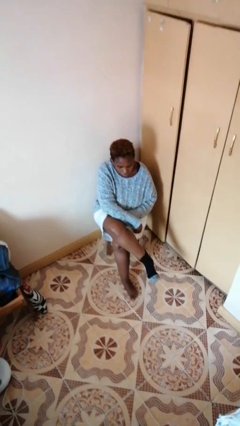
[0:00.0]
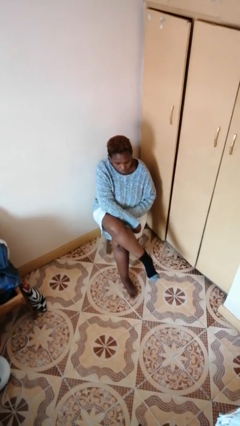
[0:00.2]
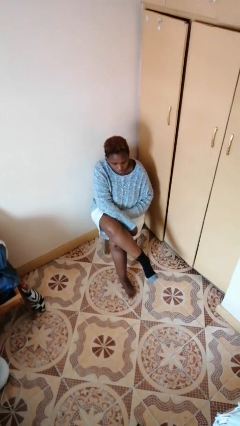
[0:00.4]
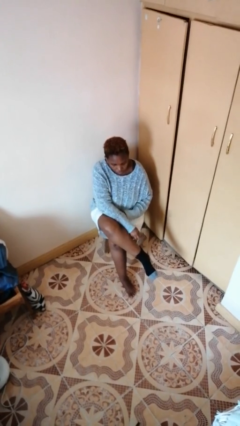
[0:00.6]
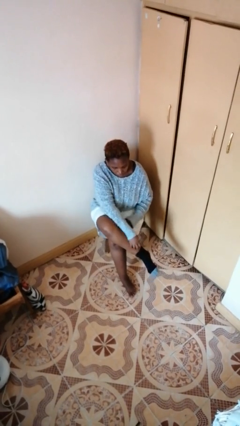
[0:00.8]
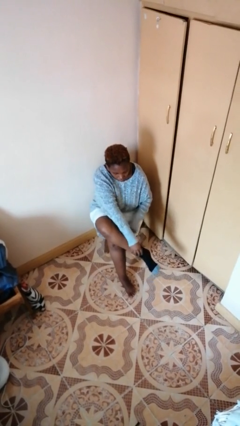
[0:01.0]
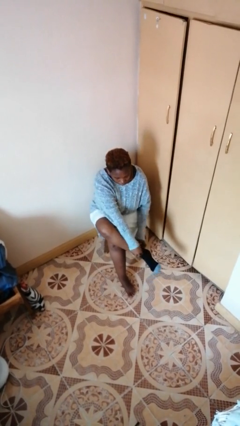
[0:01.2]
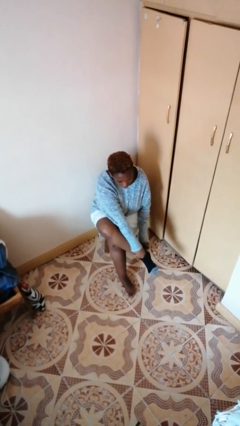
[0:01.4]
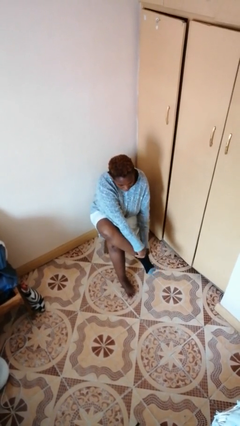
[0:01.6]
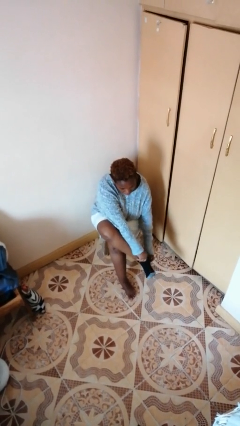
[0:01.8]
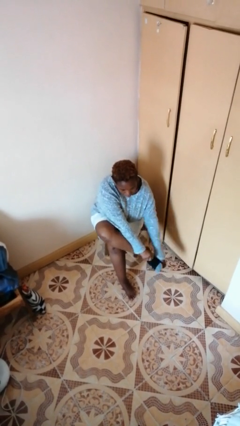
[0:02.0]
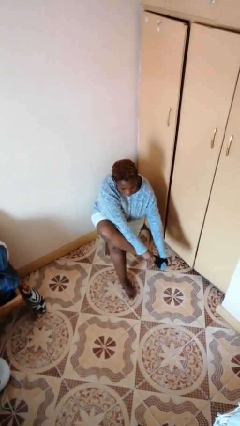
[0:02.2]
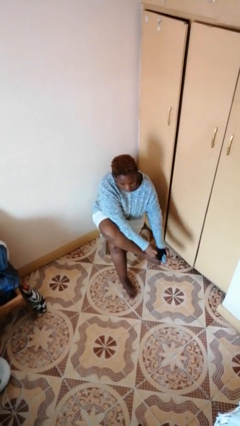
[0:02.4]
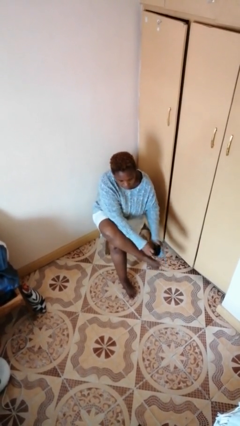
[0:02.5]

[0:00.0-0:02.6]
person takes off socks

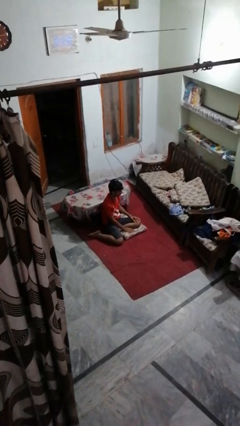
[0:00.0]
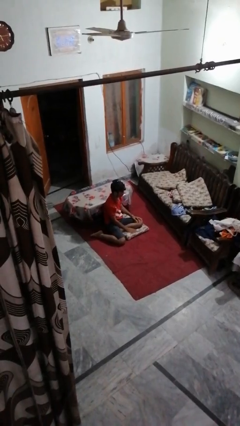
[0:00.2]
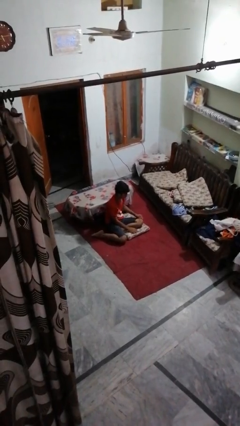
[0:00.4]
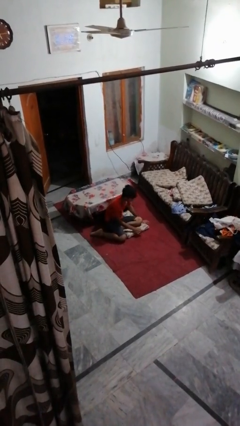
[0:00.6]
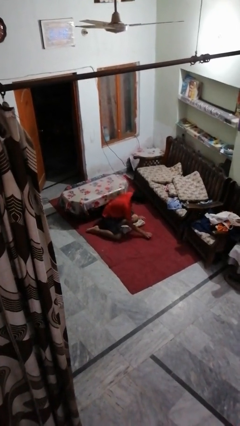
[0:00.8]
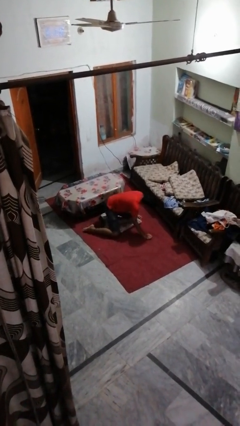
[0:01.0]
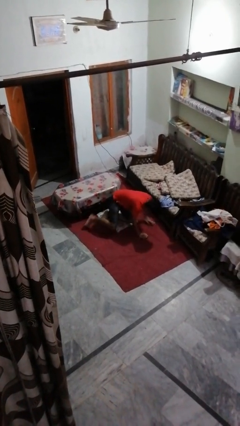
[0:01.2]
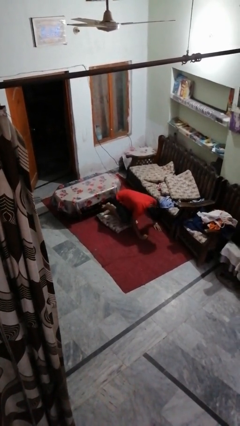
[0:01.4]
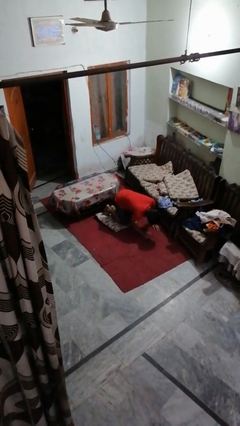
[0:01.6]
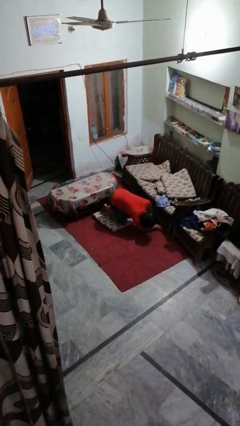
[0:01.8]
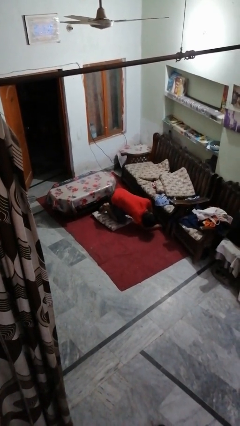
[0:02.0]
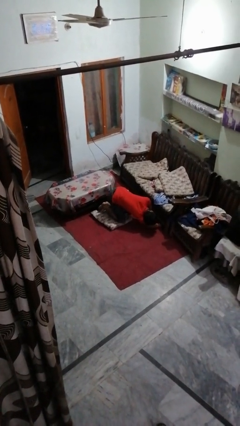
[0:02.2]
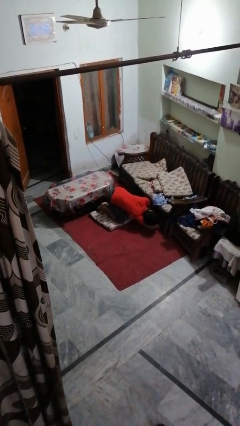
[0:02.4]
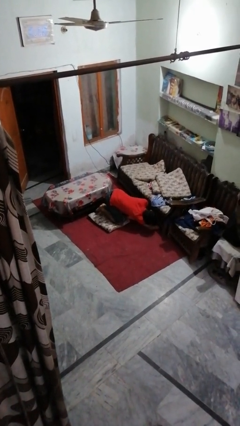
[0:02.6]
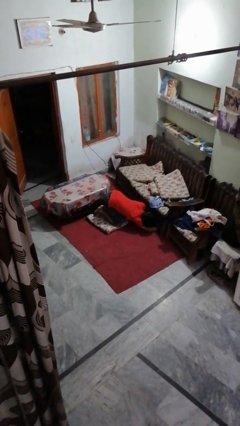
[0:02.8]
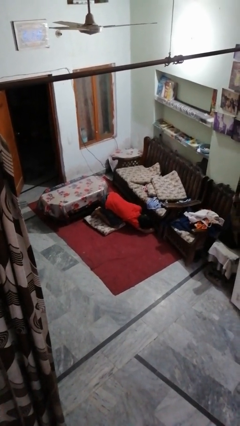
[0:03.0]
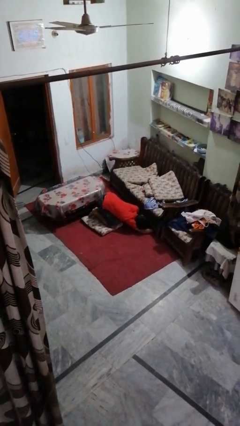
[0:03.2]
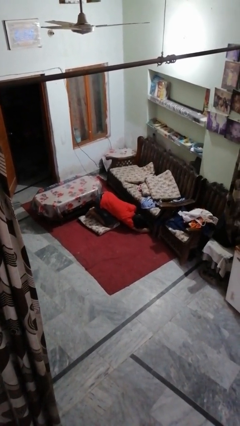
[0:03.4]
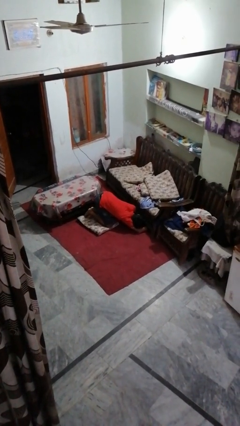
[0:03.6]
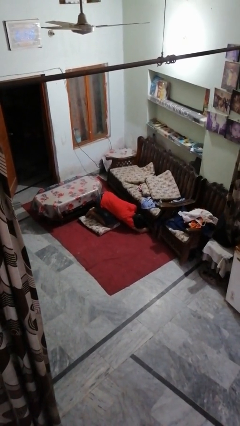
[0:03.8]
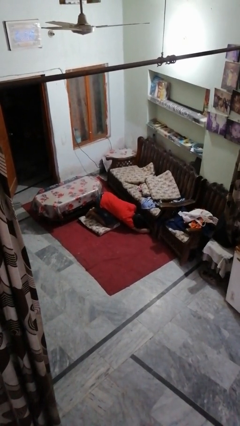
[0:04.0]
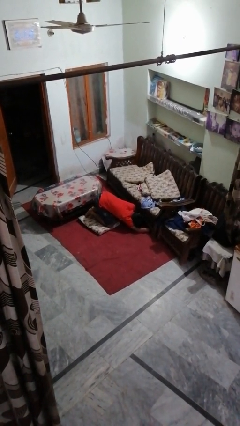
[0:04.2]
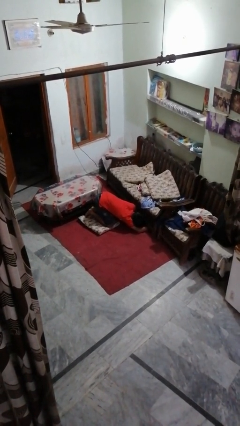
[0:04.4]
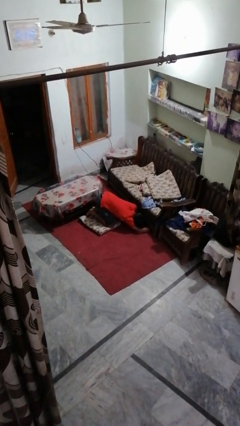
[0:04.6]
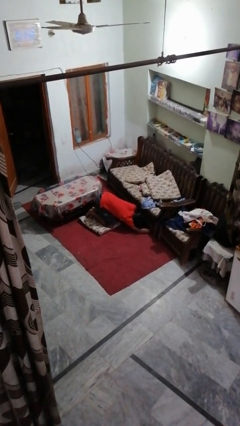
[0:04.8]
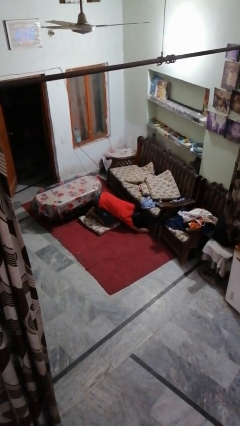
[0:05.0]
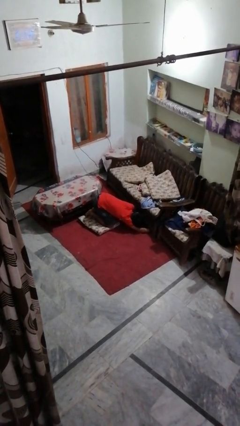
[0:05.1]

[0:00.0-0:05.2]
person searches under couch

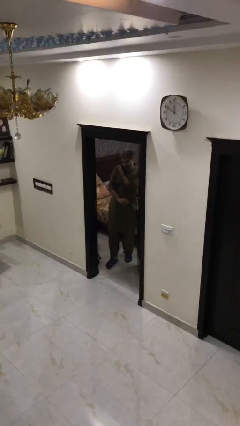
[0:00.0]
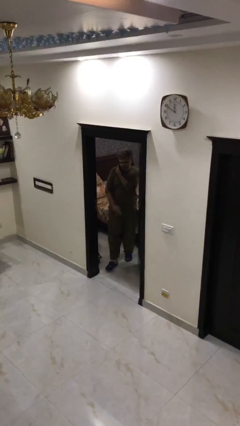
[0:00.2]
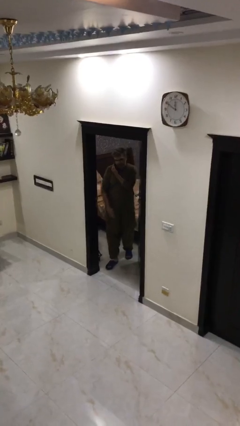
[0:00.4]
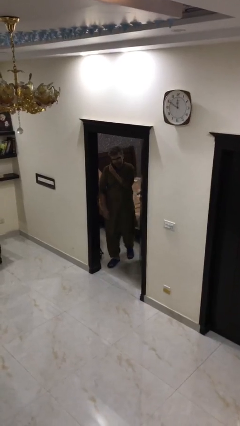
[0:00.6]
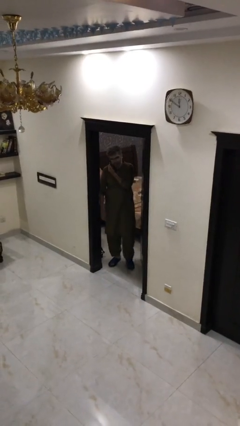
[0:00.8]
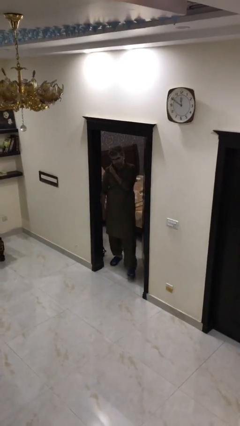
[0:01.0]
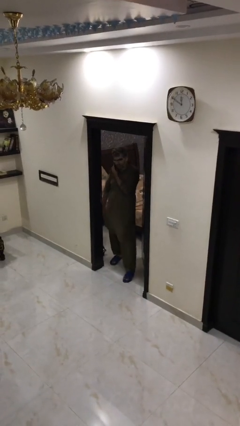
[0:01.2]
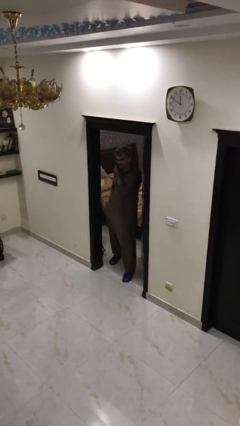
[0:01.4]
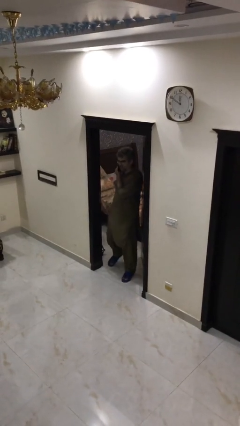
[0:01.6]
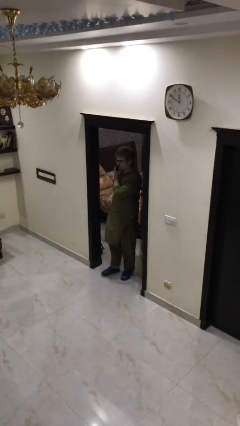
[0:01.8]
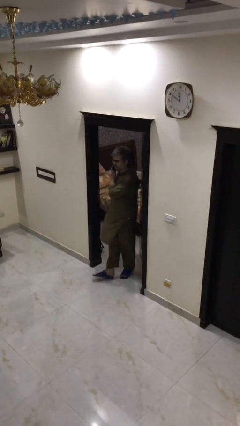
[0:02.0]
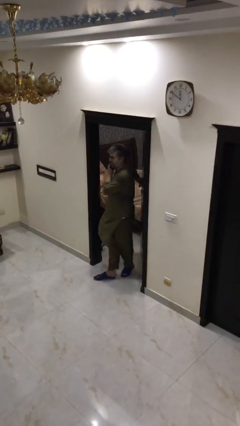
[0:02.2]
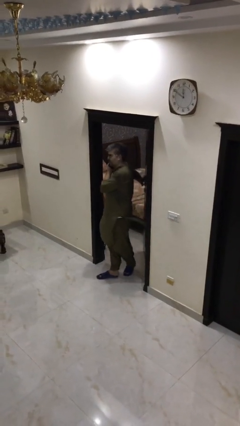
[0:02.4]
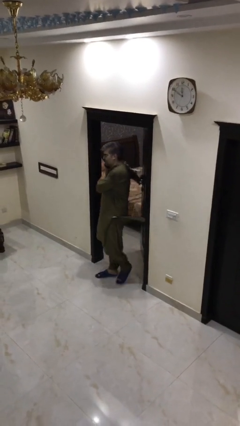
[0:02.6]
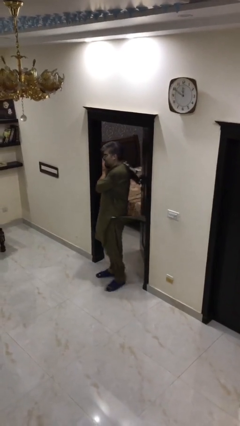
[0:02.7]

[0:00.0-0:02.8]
person enters scene through structure

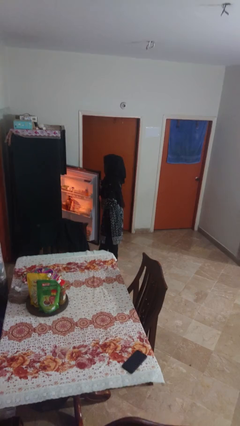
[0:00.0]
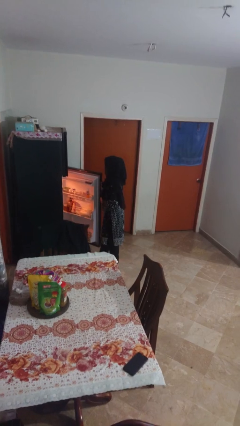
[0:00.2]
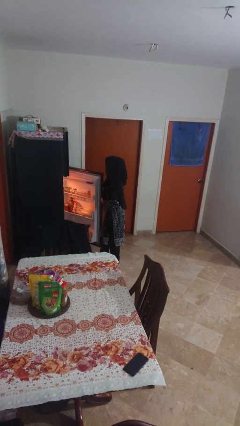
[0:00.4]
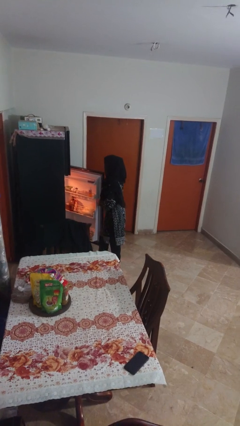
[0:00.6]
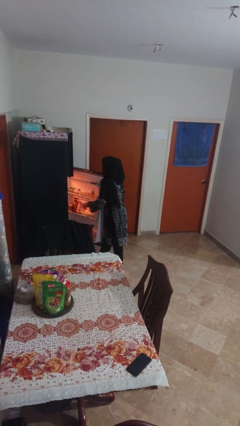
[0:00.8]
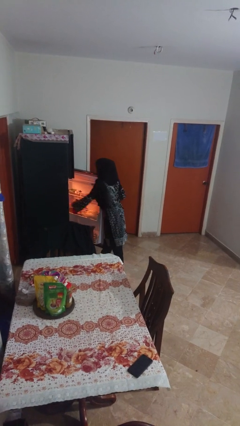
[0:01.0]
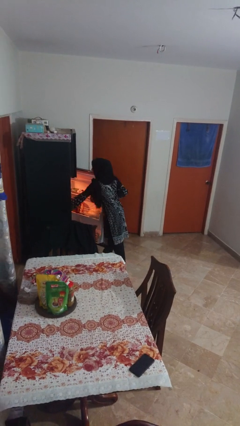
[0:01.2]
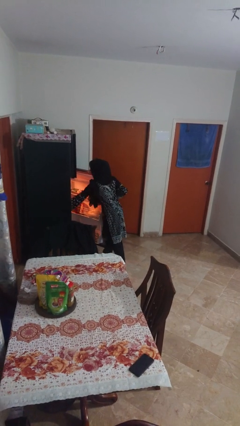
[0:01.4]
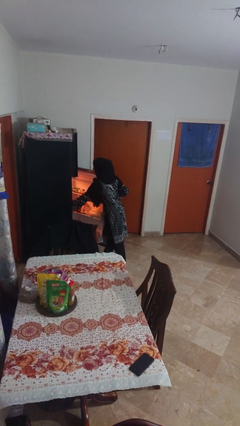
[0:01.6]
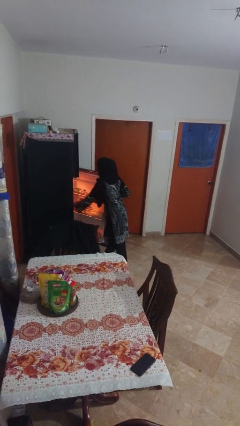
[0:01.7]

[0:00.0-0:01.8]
person takes object from refrigerator

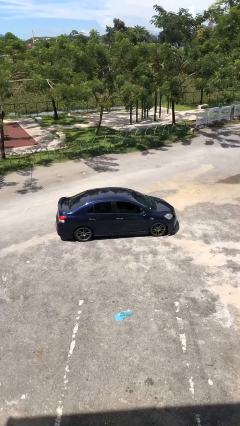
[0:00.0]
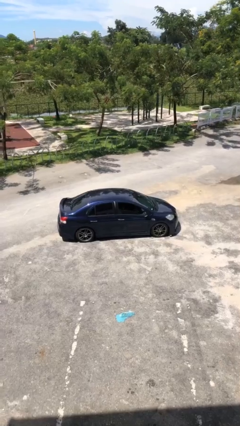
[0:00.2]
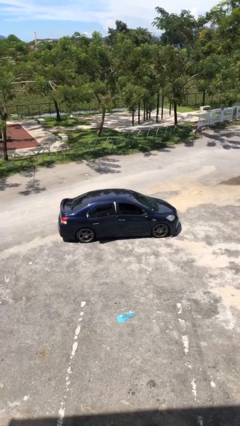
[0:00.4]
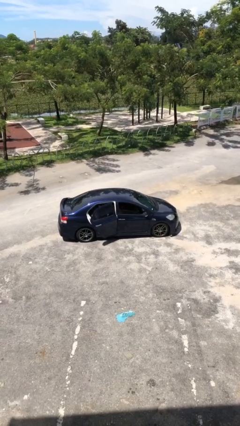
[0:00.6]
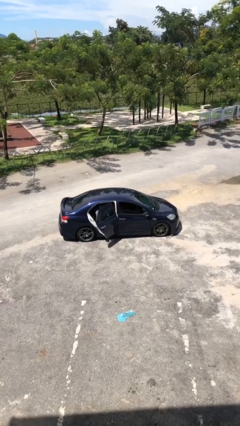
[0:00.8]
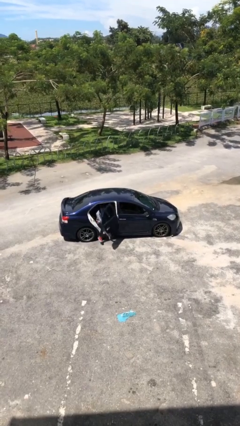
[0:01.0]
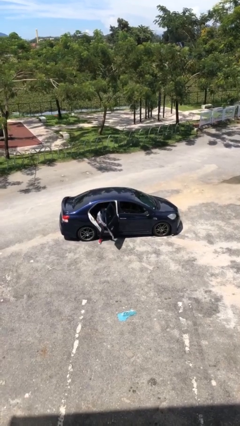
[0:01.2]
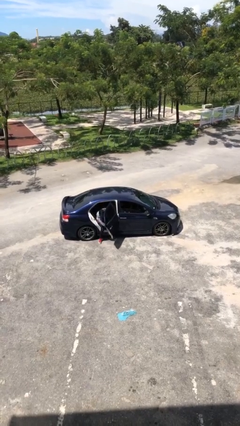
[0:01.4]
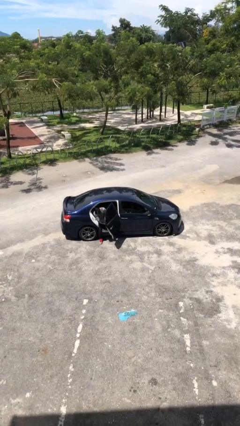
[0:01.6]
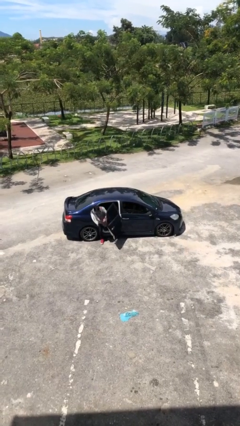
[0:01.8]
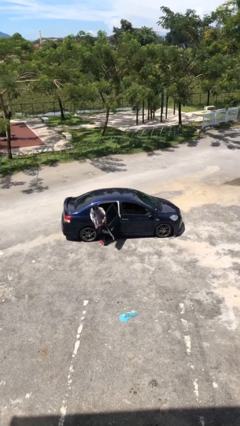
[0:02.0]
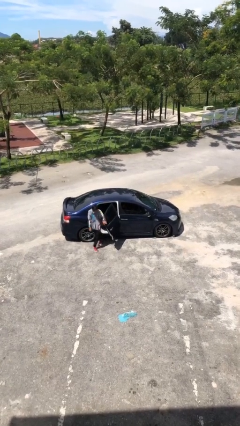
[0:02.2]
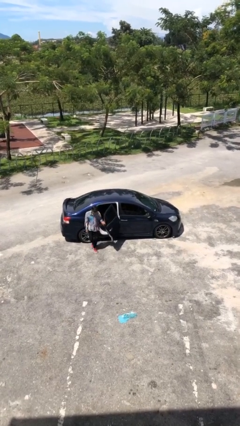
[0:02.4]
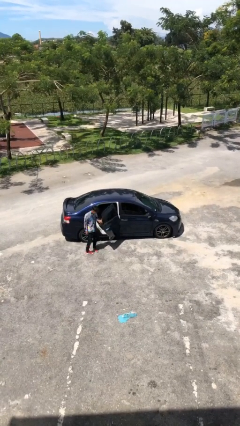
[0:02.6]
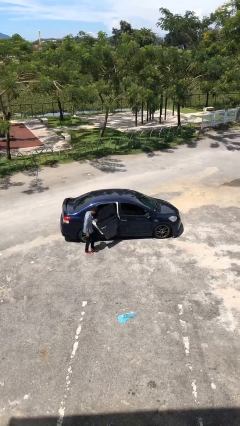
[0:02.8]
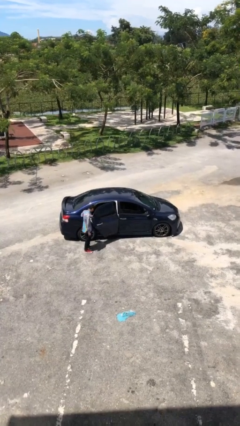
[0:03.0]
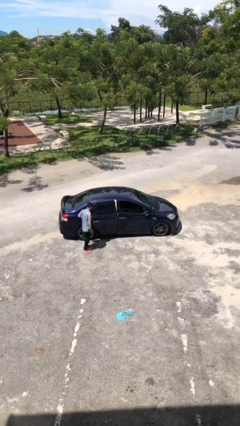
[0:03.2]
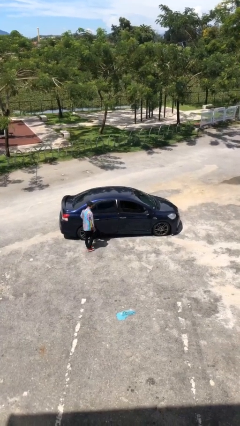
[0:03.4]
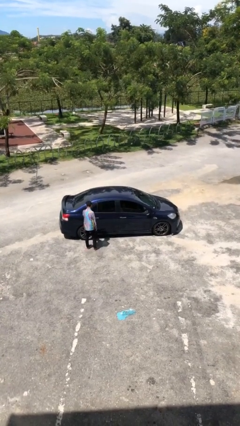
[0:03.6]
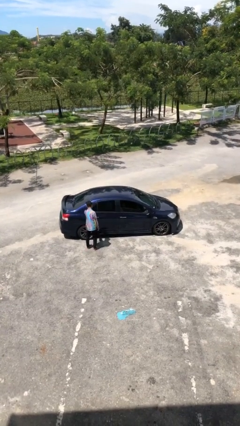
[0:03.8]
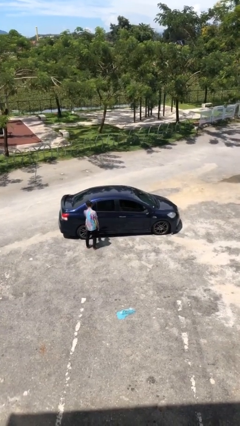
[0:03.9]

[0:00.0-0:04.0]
car drops off person

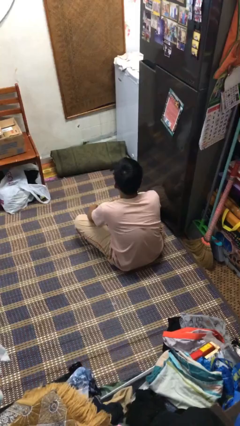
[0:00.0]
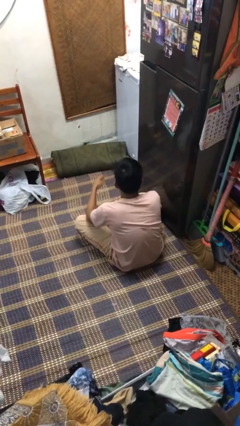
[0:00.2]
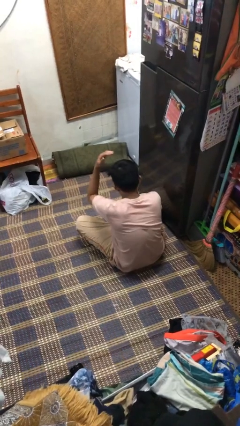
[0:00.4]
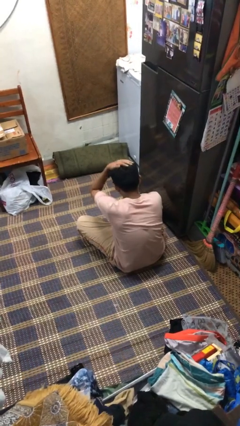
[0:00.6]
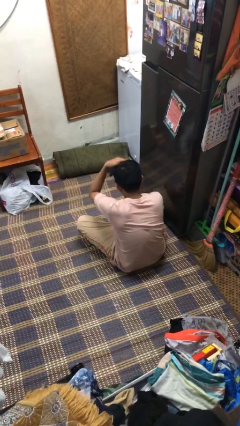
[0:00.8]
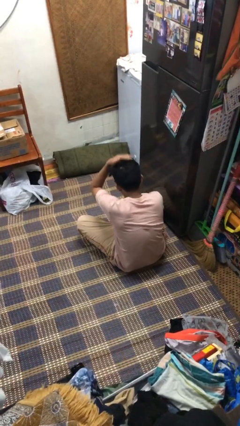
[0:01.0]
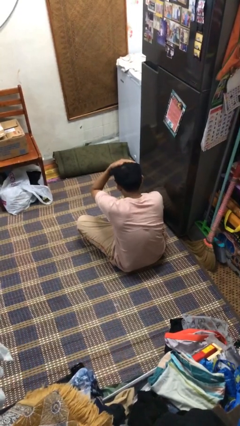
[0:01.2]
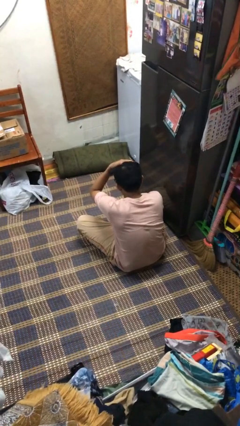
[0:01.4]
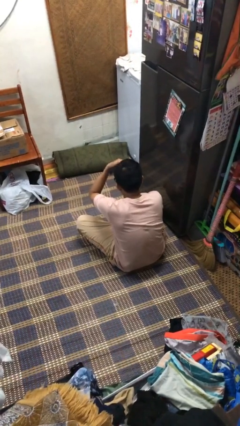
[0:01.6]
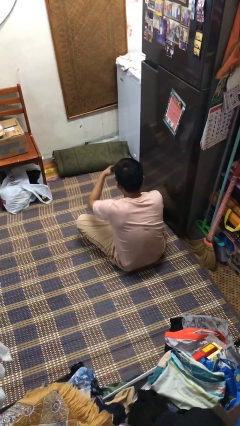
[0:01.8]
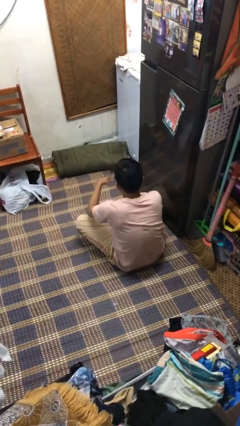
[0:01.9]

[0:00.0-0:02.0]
person pats head
